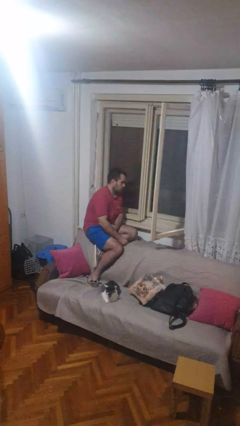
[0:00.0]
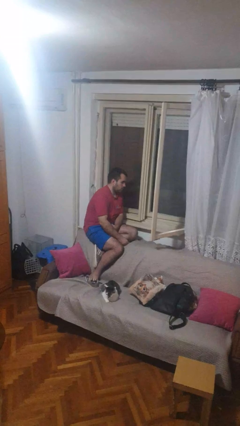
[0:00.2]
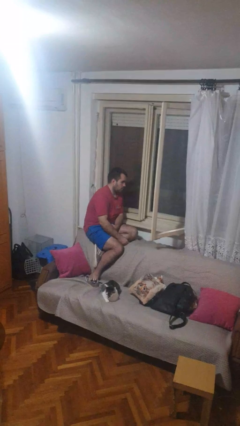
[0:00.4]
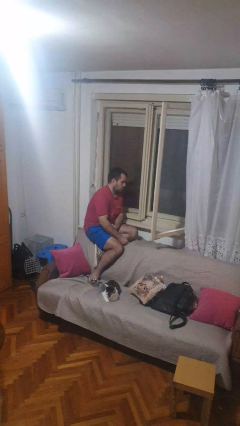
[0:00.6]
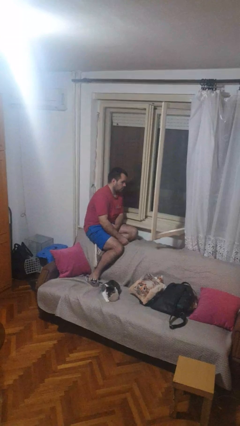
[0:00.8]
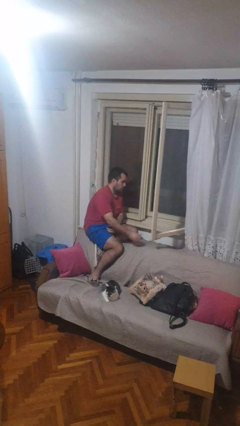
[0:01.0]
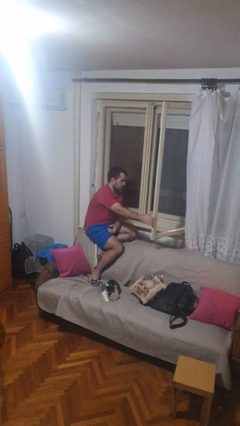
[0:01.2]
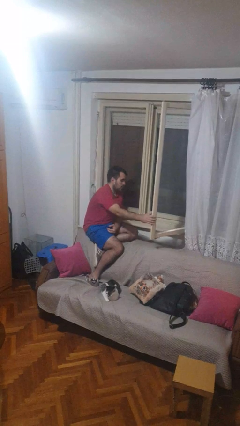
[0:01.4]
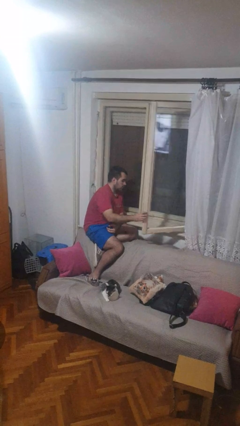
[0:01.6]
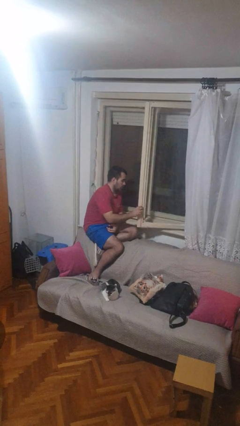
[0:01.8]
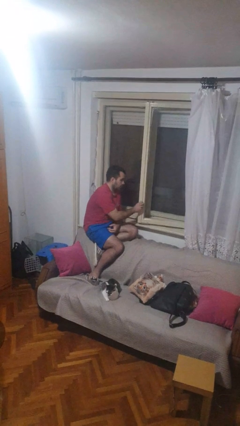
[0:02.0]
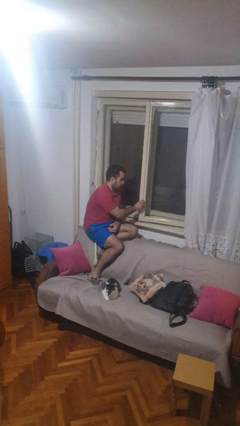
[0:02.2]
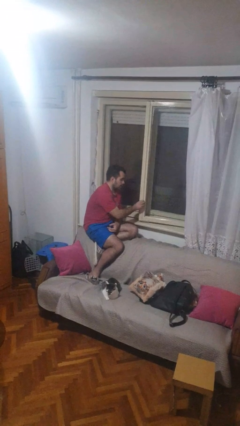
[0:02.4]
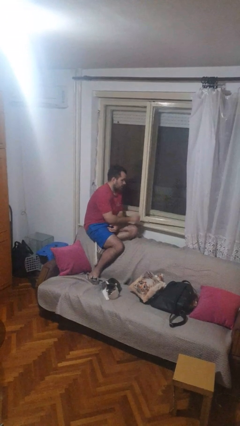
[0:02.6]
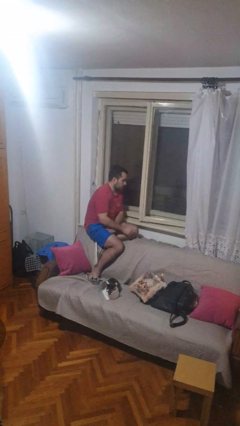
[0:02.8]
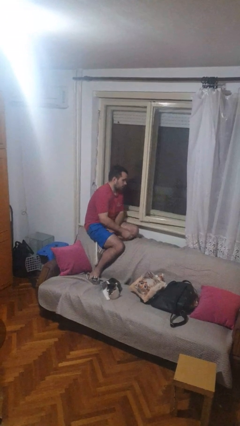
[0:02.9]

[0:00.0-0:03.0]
person closes home window

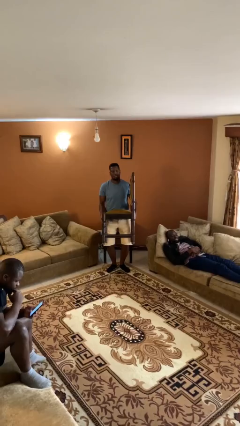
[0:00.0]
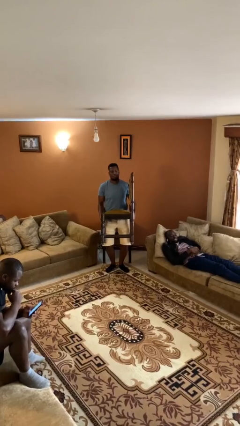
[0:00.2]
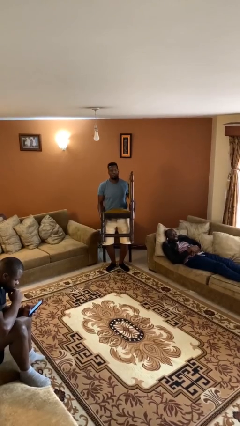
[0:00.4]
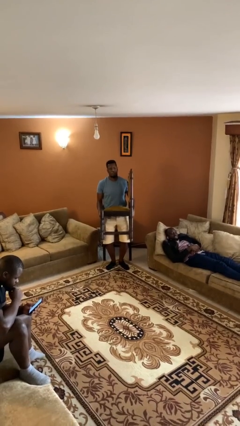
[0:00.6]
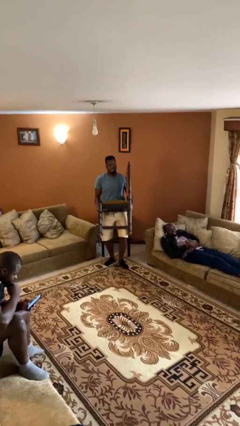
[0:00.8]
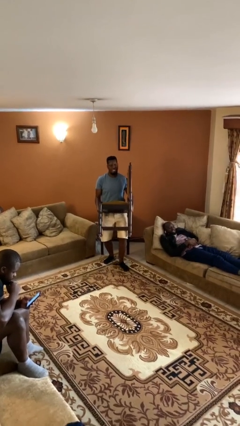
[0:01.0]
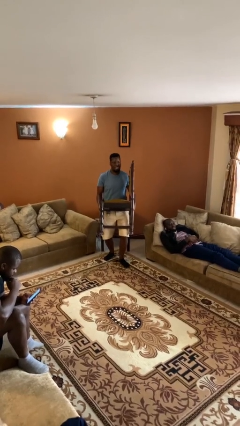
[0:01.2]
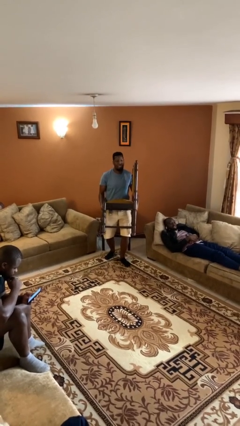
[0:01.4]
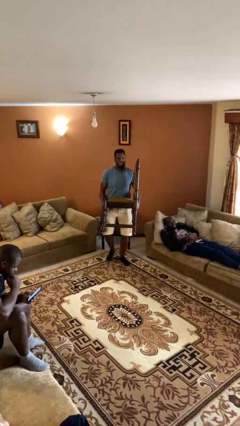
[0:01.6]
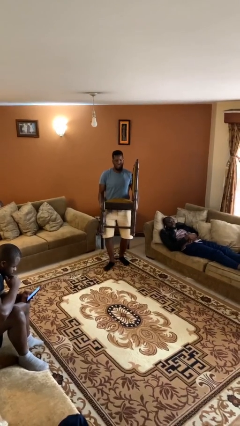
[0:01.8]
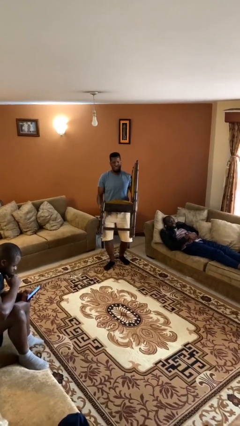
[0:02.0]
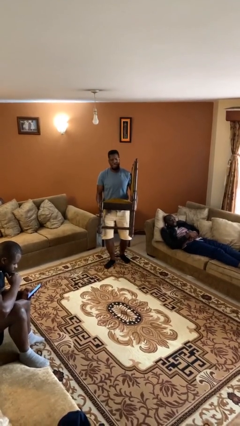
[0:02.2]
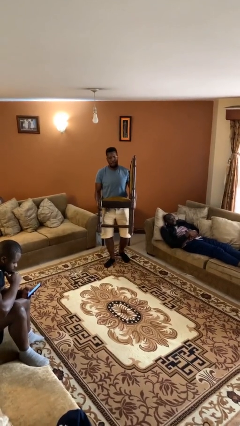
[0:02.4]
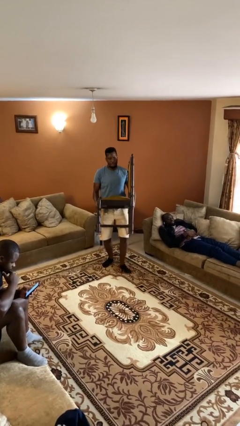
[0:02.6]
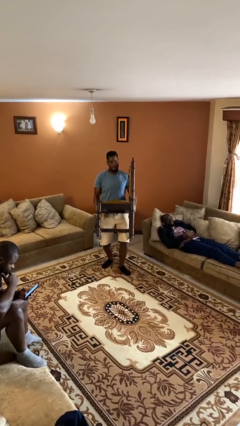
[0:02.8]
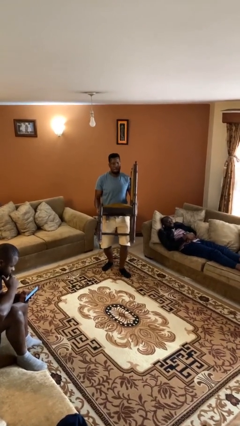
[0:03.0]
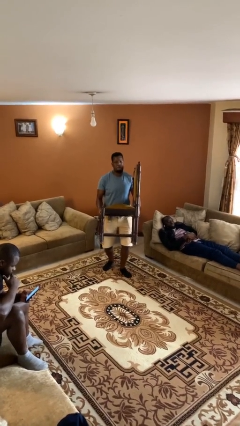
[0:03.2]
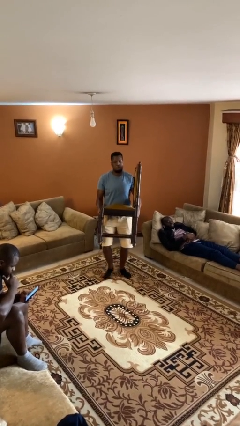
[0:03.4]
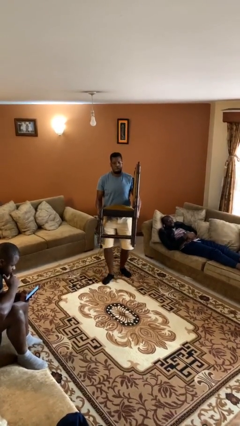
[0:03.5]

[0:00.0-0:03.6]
person carries heavy object

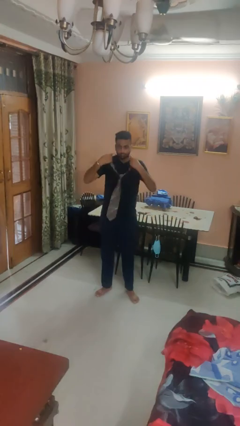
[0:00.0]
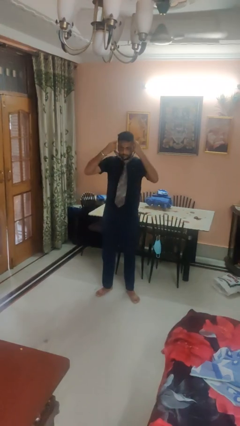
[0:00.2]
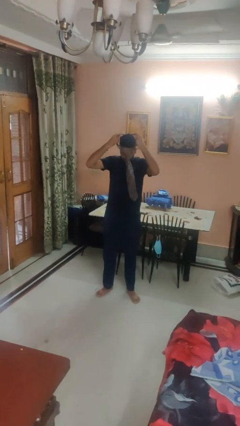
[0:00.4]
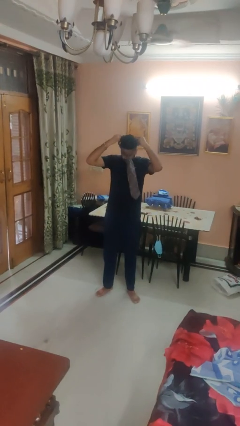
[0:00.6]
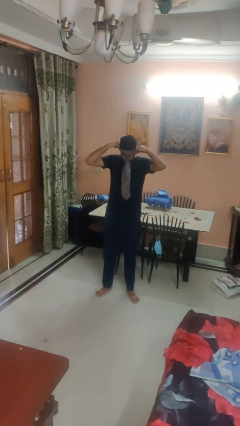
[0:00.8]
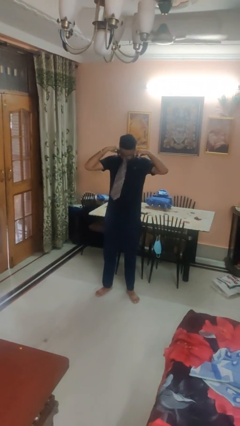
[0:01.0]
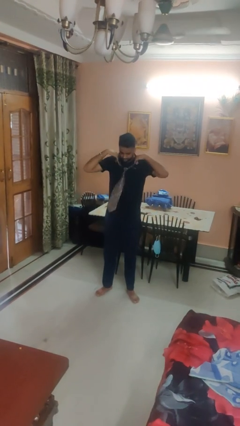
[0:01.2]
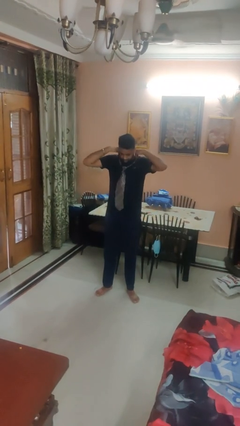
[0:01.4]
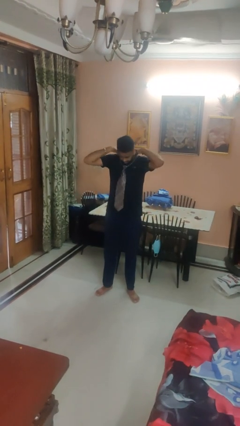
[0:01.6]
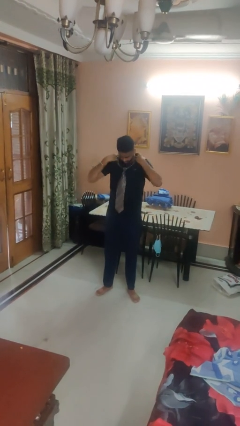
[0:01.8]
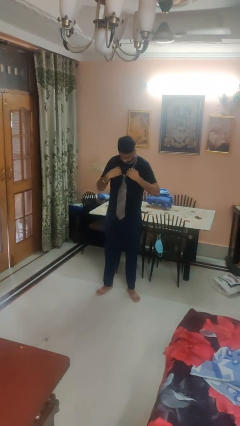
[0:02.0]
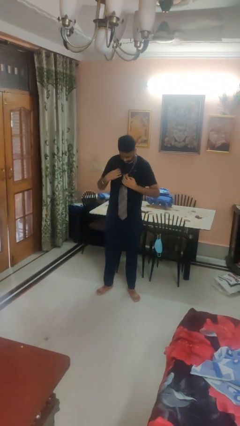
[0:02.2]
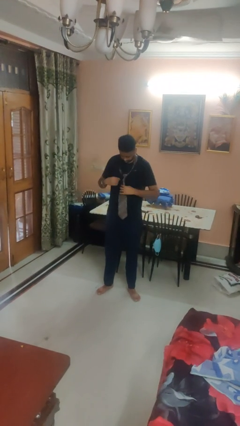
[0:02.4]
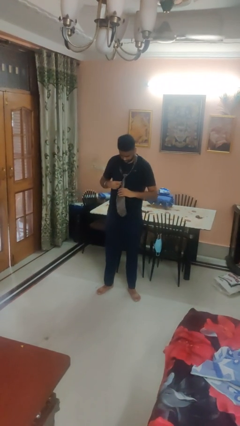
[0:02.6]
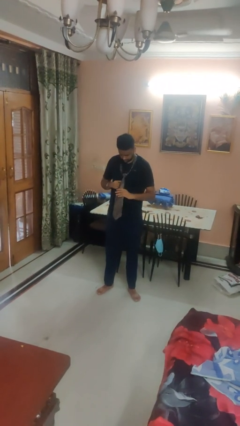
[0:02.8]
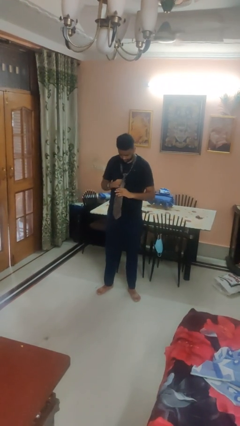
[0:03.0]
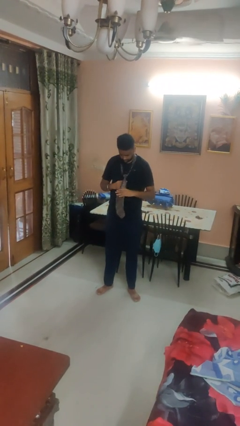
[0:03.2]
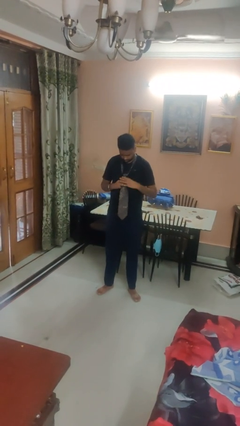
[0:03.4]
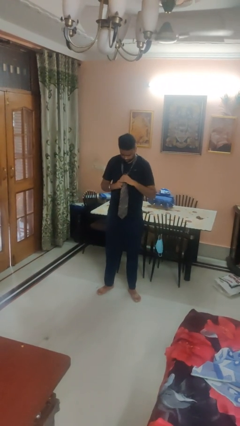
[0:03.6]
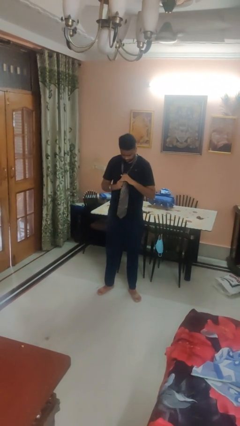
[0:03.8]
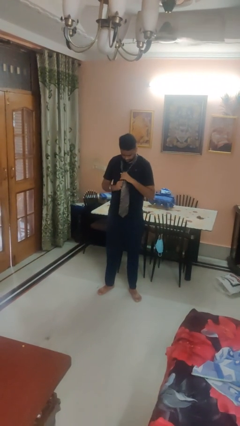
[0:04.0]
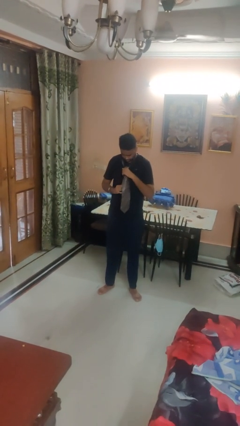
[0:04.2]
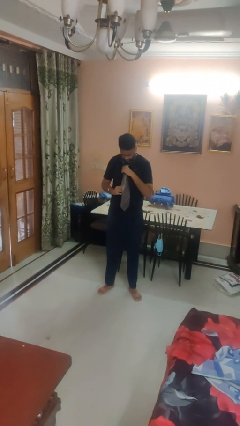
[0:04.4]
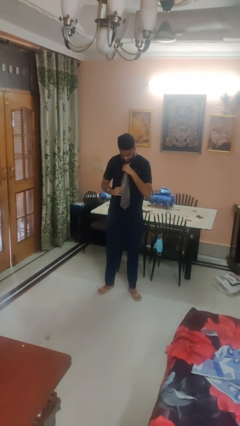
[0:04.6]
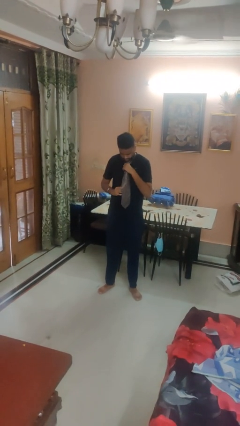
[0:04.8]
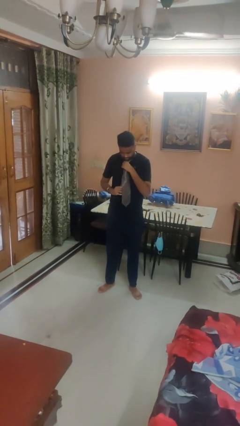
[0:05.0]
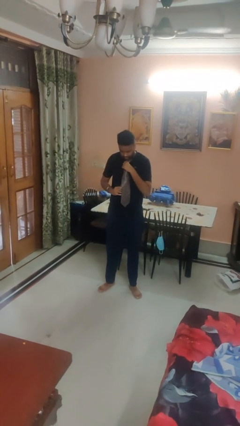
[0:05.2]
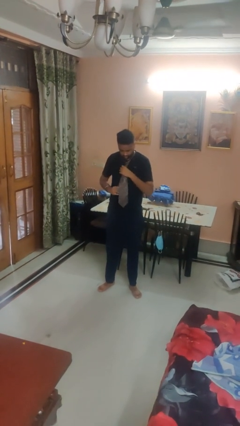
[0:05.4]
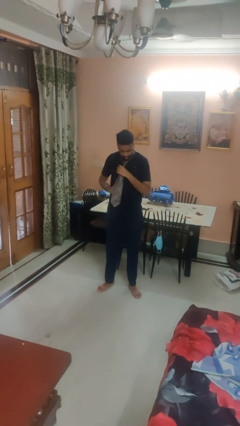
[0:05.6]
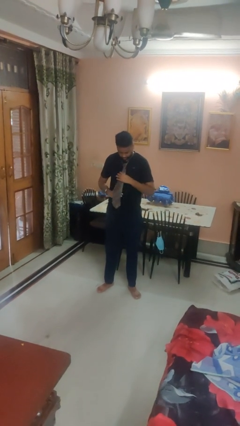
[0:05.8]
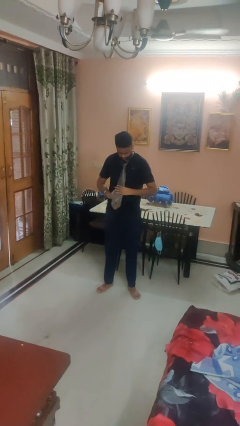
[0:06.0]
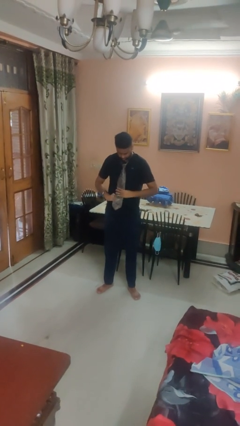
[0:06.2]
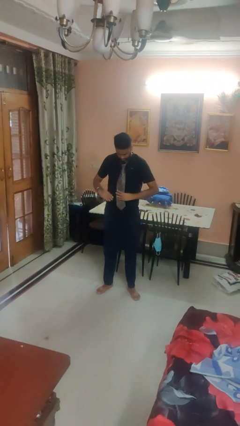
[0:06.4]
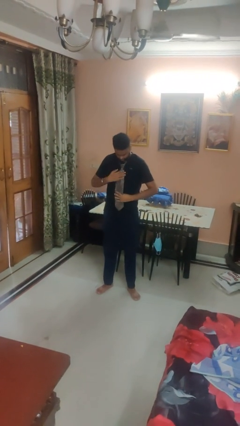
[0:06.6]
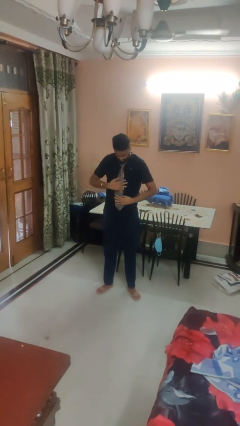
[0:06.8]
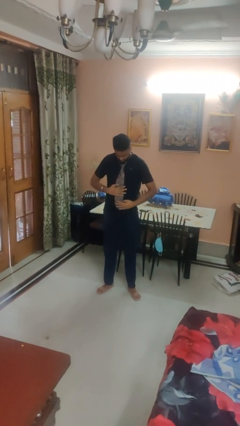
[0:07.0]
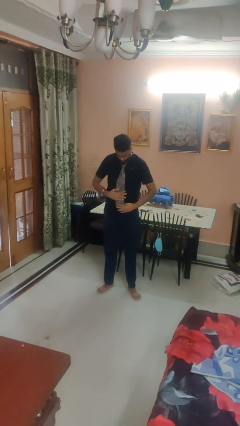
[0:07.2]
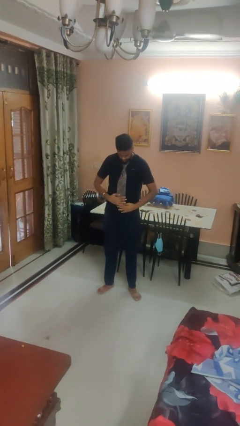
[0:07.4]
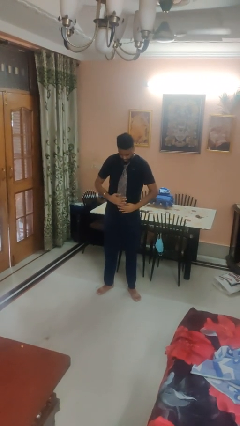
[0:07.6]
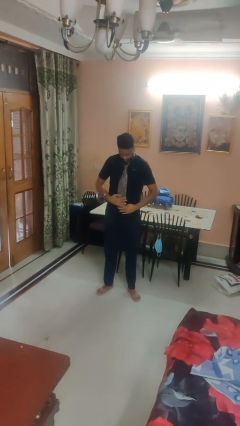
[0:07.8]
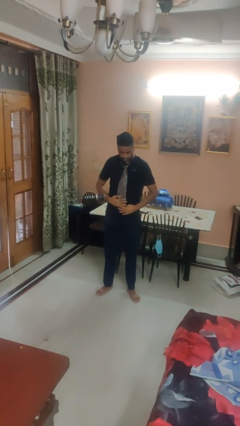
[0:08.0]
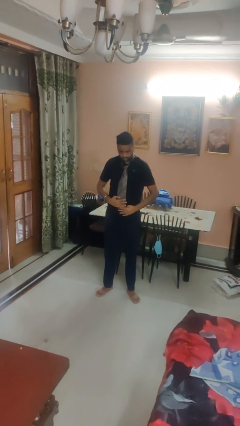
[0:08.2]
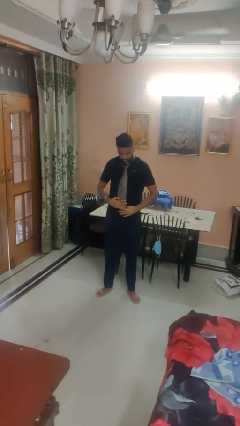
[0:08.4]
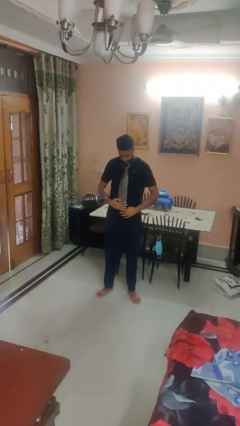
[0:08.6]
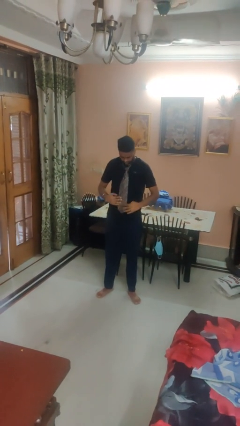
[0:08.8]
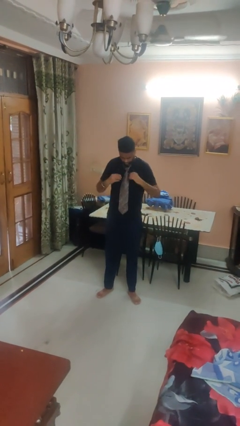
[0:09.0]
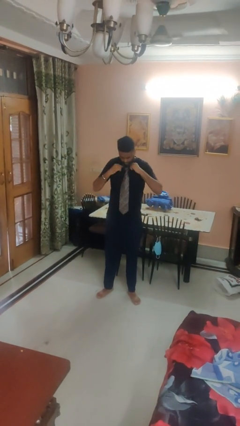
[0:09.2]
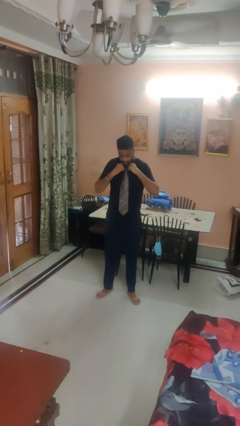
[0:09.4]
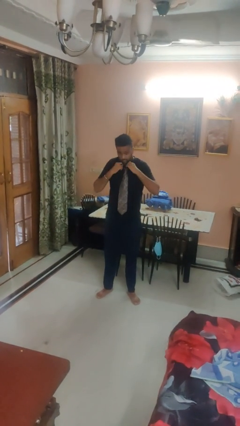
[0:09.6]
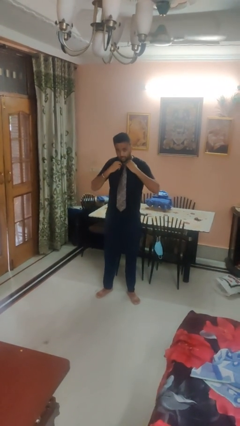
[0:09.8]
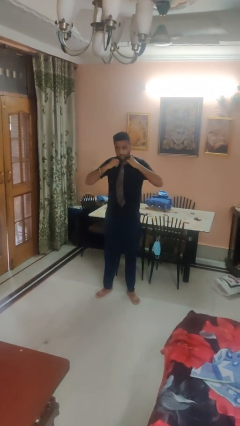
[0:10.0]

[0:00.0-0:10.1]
person puts on necktie

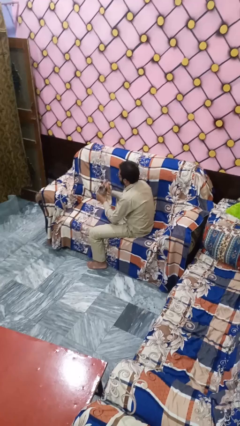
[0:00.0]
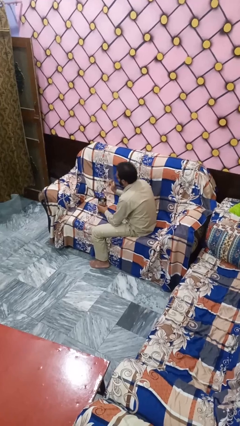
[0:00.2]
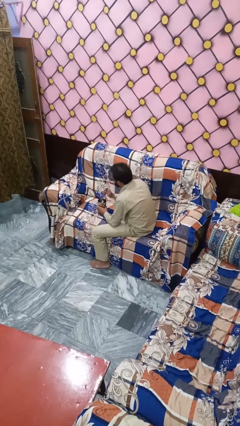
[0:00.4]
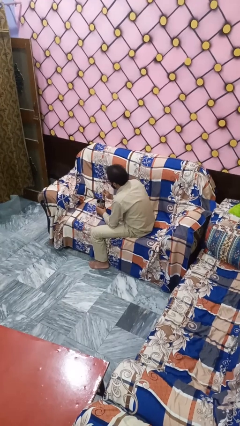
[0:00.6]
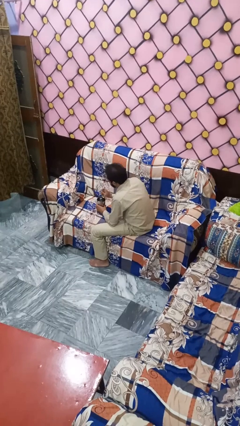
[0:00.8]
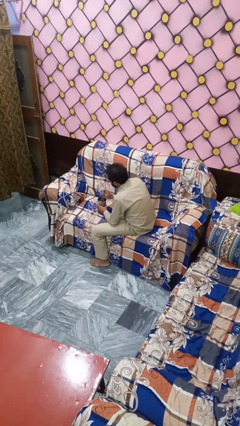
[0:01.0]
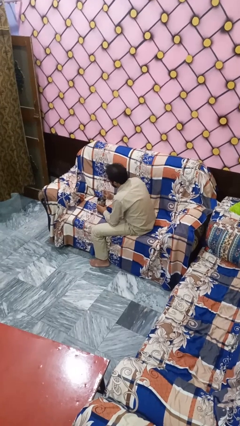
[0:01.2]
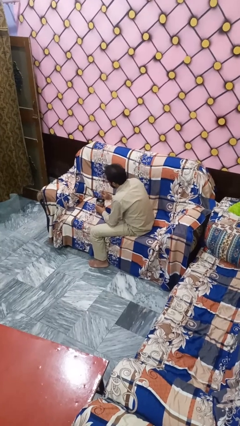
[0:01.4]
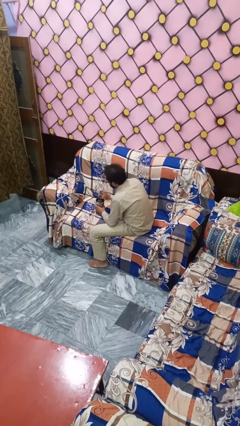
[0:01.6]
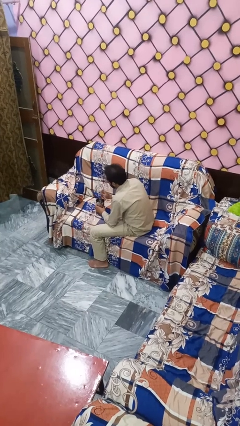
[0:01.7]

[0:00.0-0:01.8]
person stirs mug
